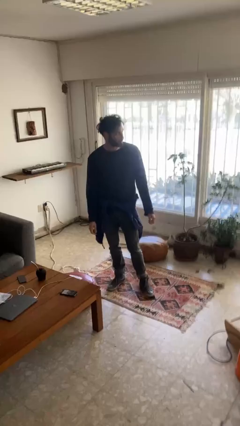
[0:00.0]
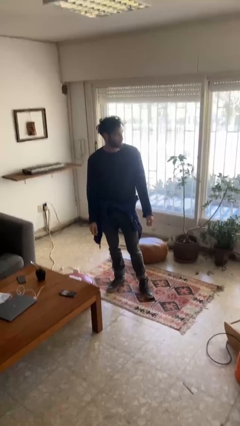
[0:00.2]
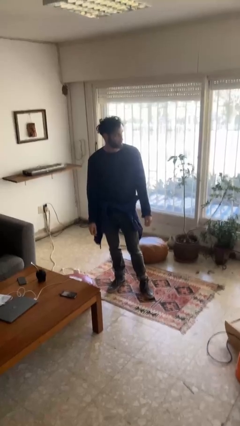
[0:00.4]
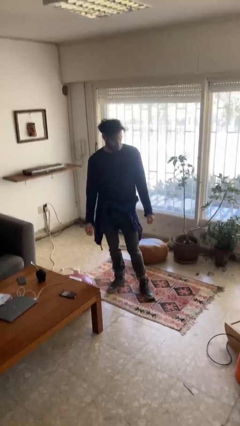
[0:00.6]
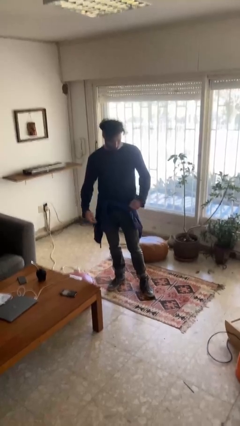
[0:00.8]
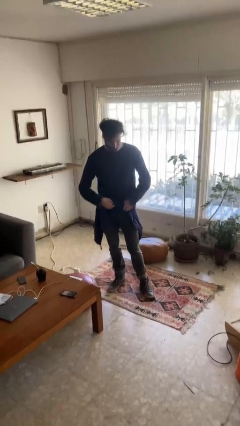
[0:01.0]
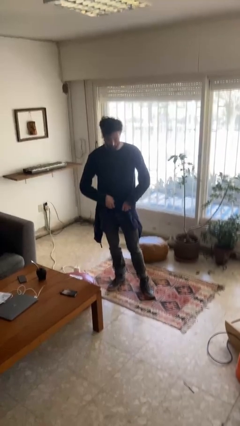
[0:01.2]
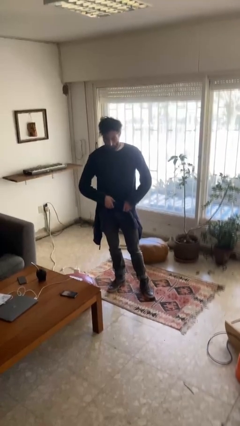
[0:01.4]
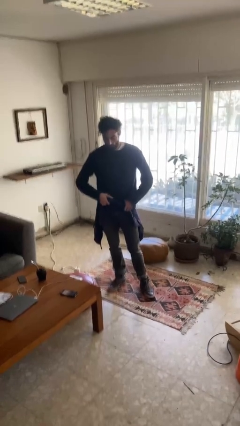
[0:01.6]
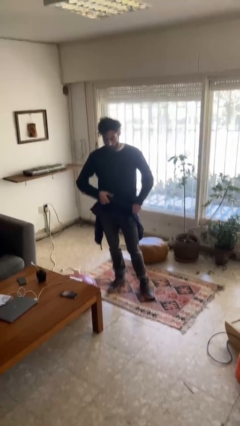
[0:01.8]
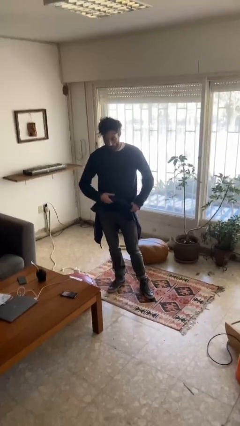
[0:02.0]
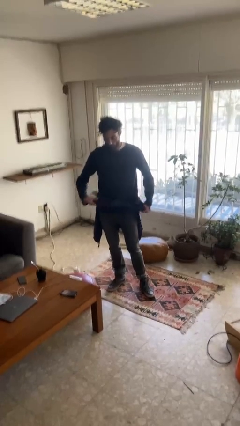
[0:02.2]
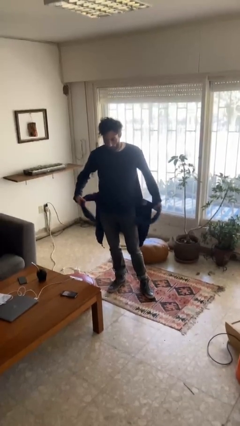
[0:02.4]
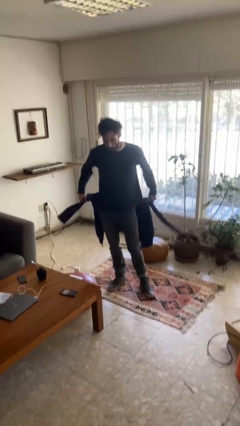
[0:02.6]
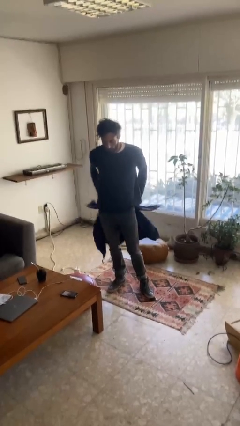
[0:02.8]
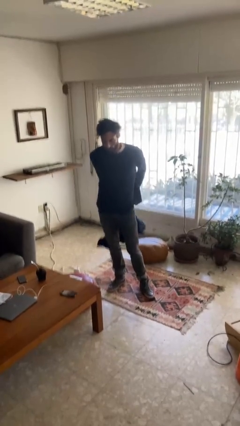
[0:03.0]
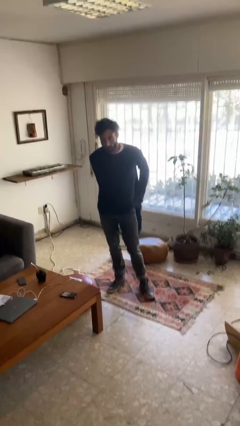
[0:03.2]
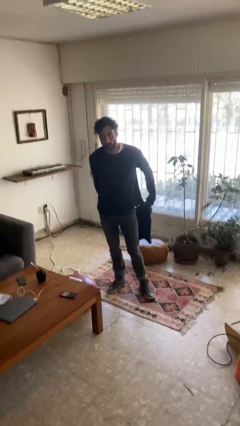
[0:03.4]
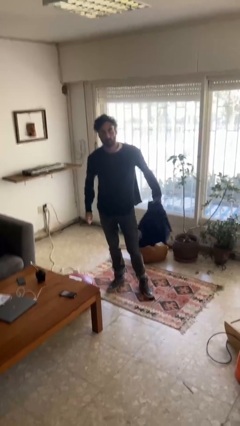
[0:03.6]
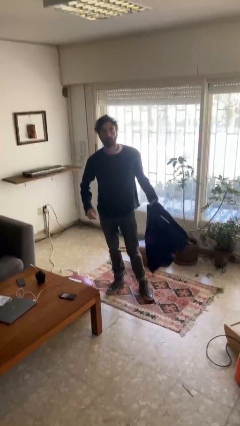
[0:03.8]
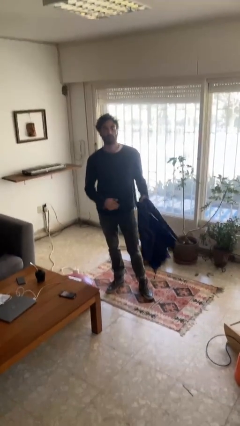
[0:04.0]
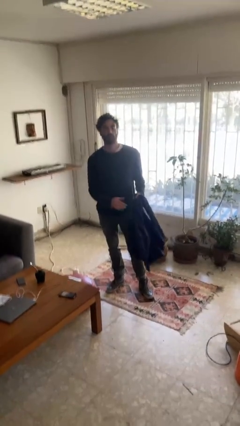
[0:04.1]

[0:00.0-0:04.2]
person unties jacket around waist

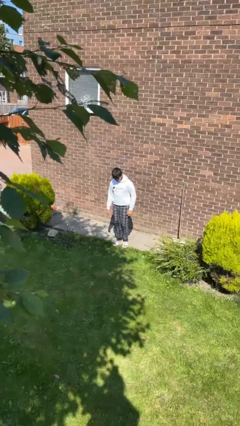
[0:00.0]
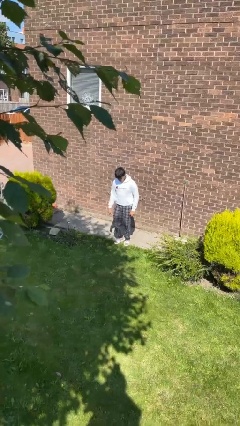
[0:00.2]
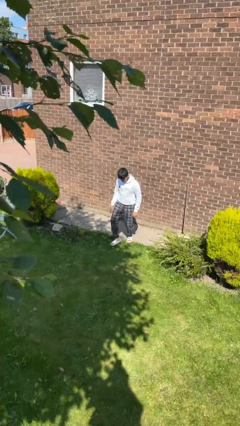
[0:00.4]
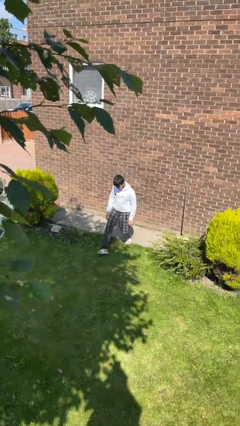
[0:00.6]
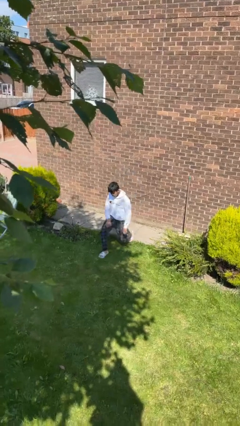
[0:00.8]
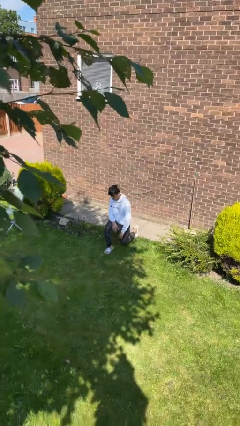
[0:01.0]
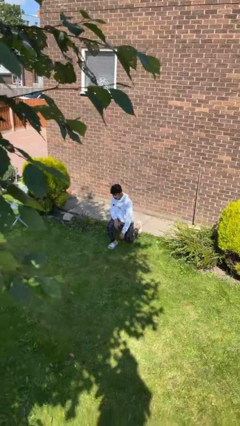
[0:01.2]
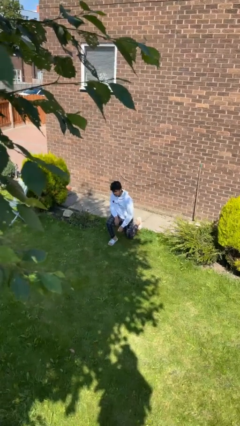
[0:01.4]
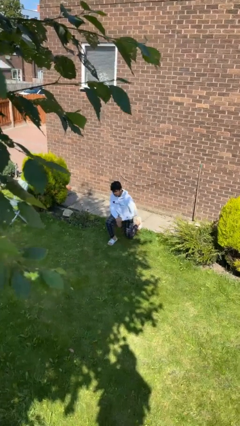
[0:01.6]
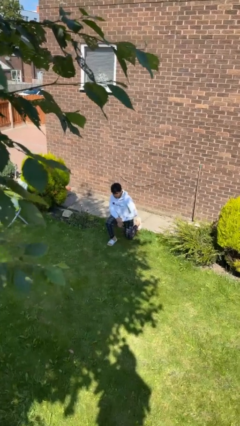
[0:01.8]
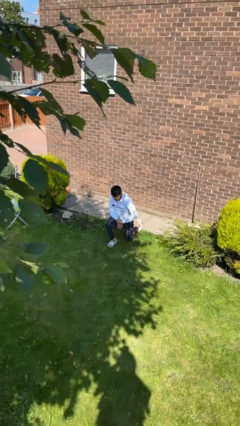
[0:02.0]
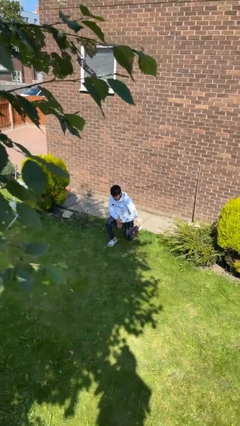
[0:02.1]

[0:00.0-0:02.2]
person kneels

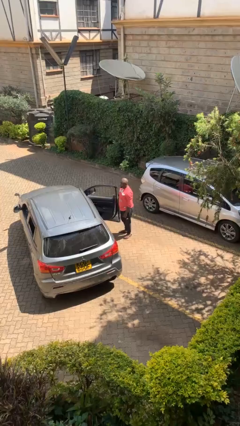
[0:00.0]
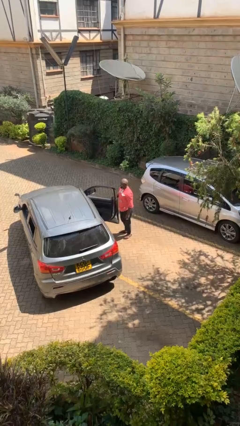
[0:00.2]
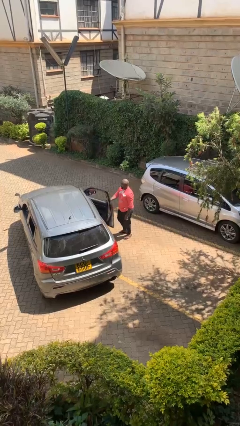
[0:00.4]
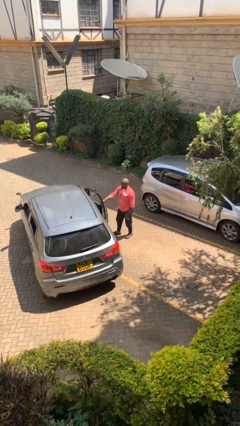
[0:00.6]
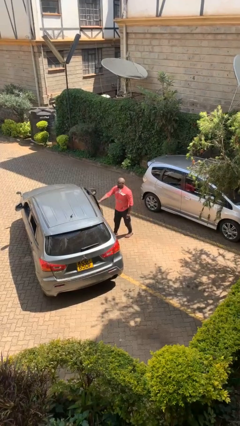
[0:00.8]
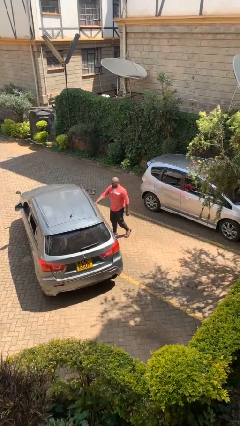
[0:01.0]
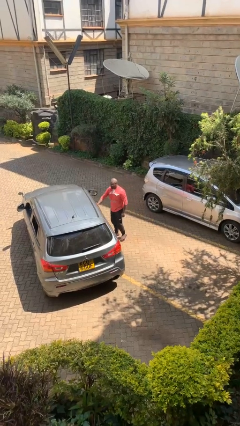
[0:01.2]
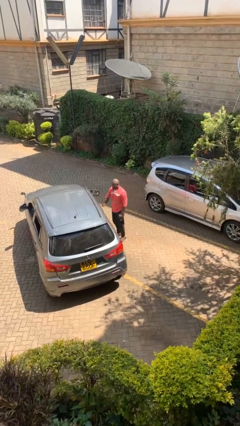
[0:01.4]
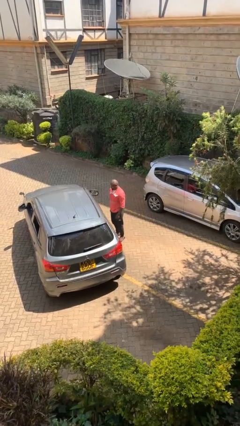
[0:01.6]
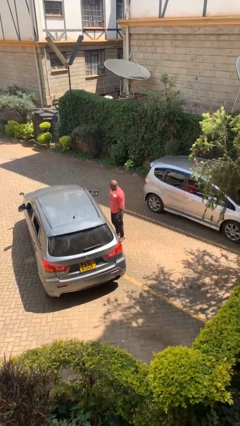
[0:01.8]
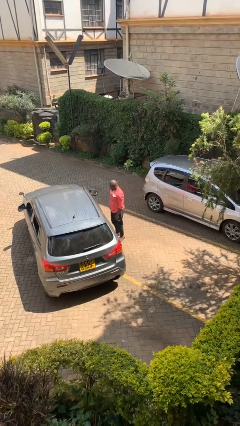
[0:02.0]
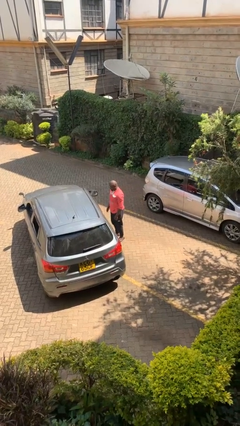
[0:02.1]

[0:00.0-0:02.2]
person closes car door

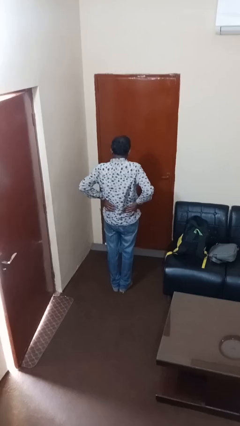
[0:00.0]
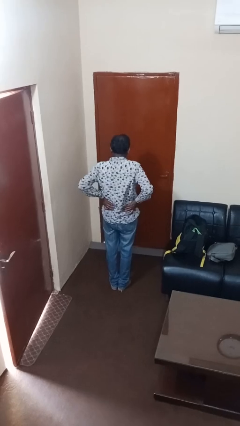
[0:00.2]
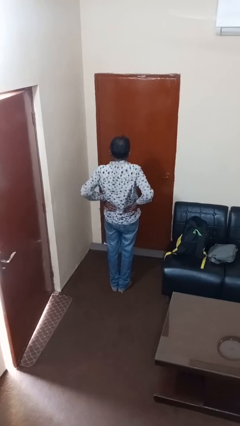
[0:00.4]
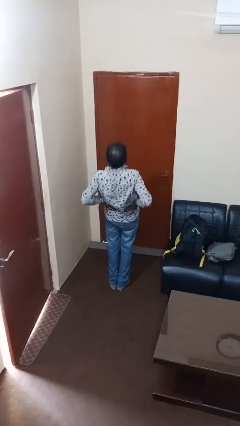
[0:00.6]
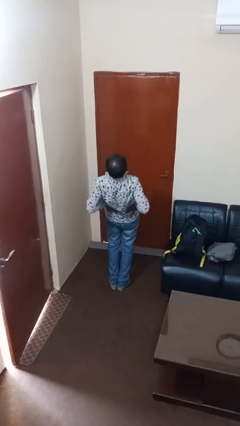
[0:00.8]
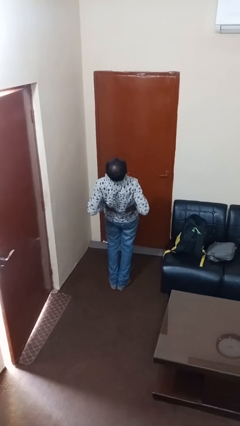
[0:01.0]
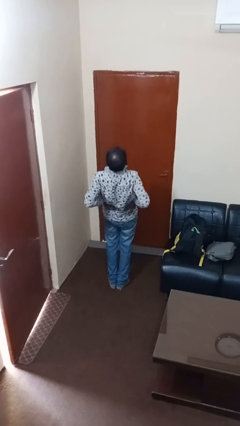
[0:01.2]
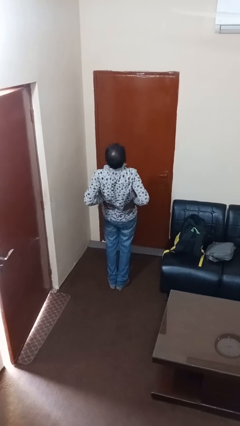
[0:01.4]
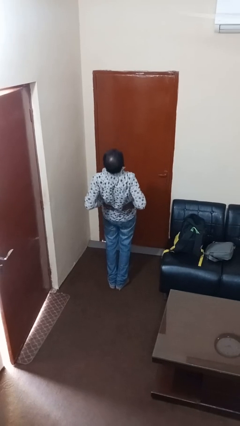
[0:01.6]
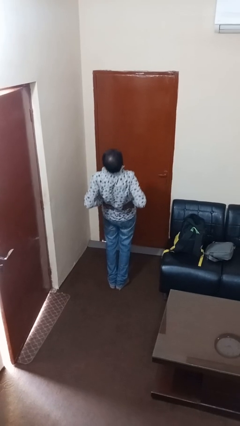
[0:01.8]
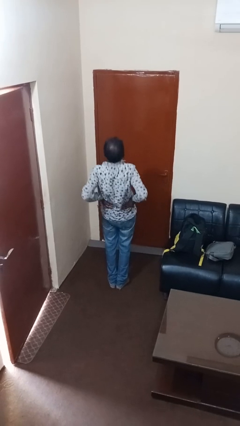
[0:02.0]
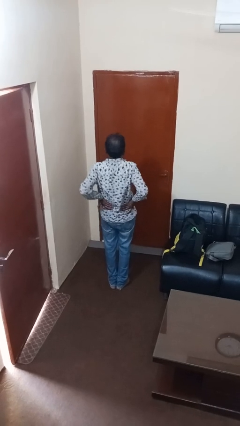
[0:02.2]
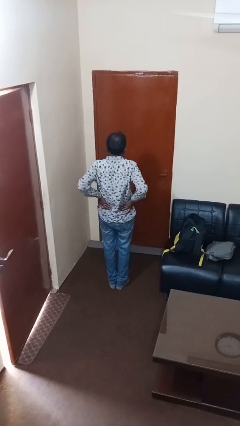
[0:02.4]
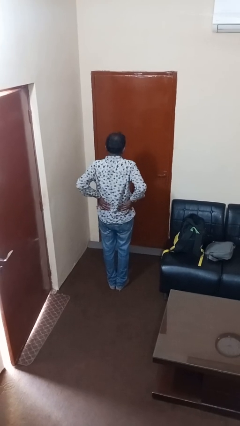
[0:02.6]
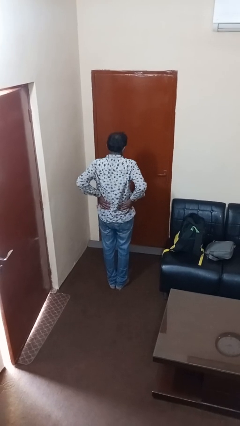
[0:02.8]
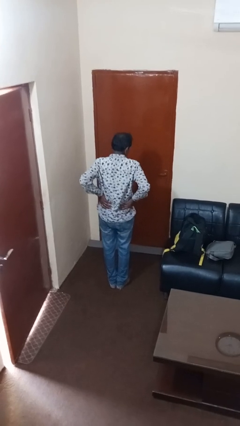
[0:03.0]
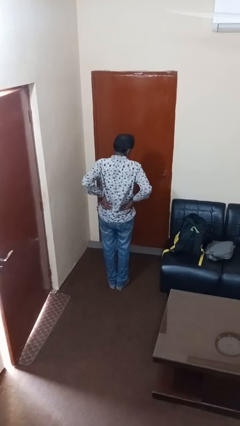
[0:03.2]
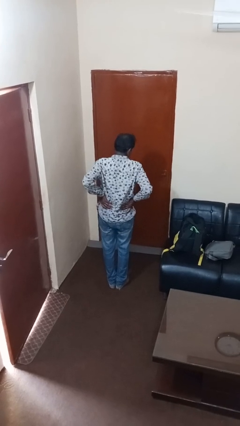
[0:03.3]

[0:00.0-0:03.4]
person stretches back

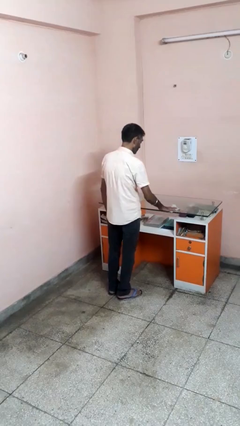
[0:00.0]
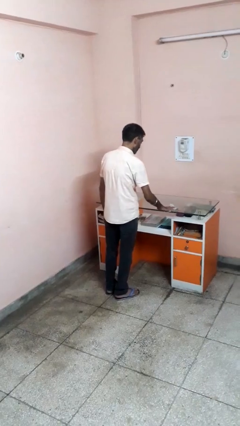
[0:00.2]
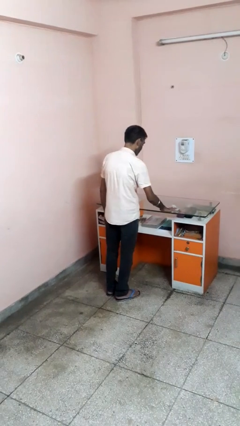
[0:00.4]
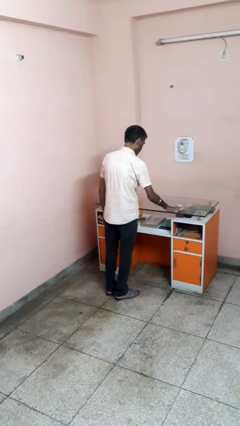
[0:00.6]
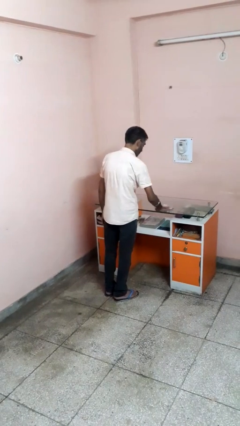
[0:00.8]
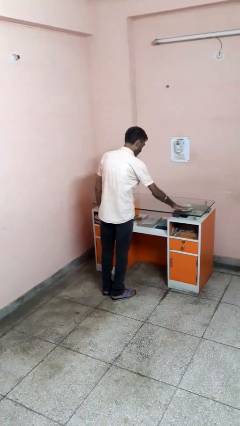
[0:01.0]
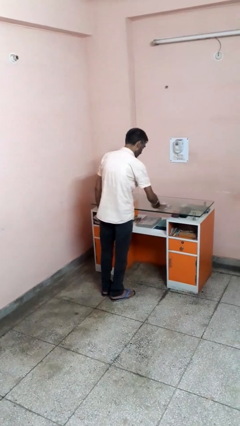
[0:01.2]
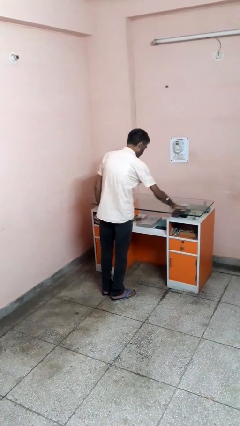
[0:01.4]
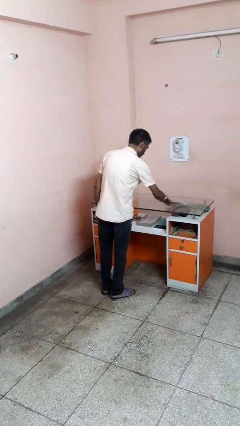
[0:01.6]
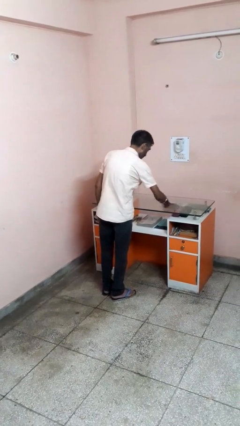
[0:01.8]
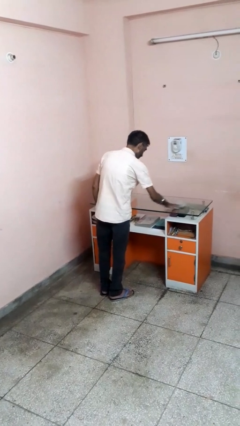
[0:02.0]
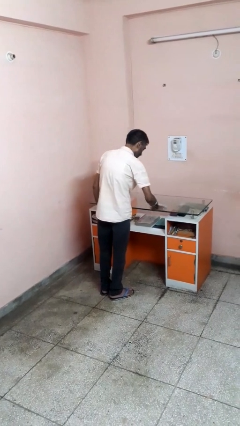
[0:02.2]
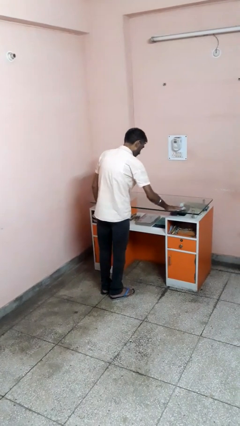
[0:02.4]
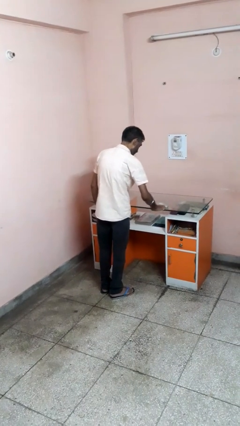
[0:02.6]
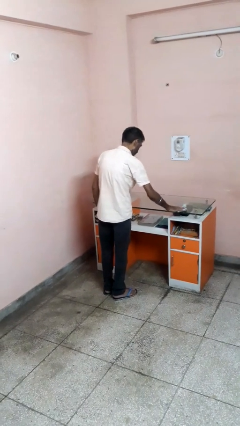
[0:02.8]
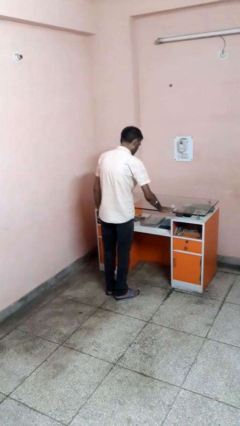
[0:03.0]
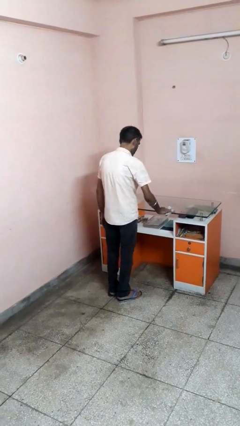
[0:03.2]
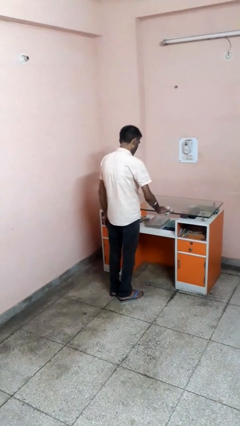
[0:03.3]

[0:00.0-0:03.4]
person cleans table with rag

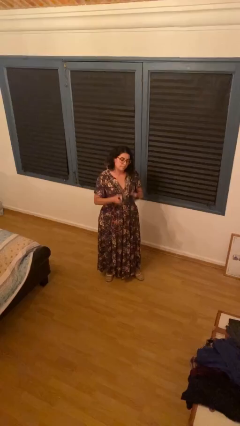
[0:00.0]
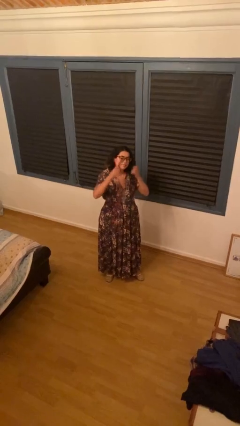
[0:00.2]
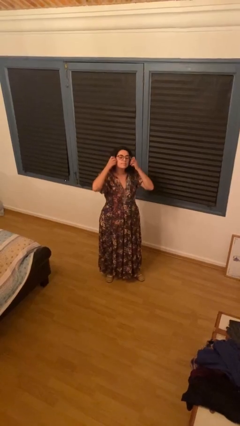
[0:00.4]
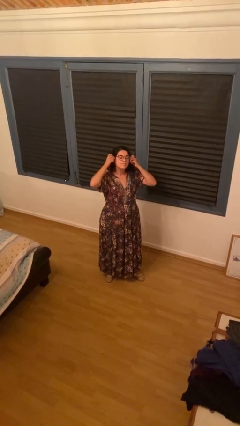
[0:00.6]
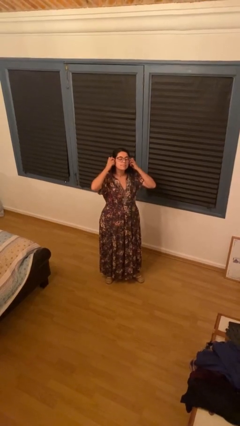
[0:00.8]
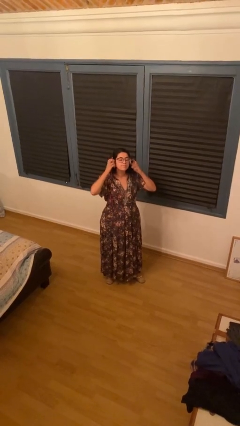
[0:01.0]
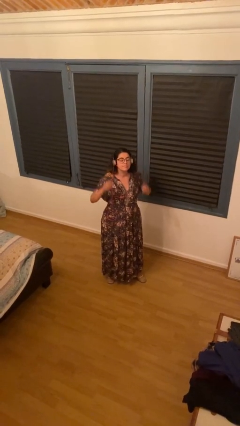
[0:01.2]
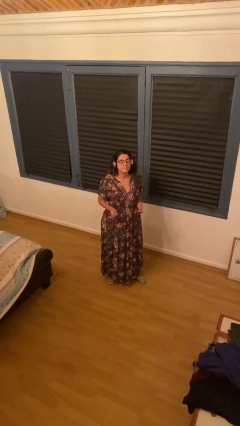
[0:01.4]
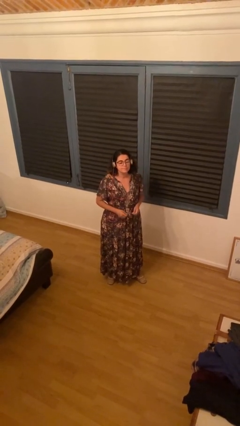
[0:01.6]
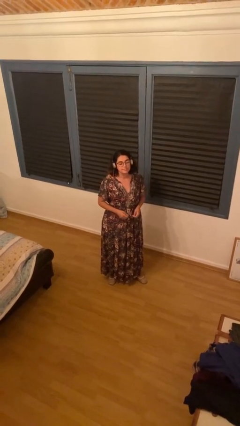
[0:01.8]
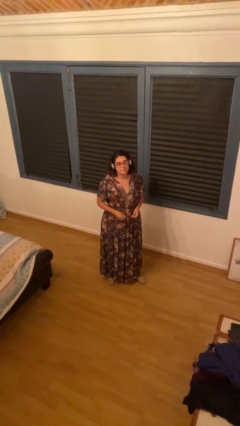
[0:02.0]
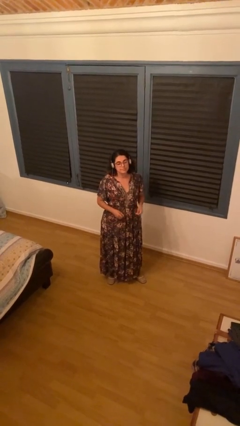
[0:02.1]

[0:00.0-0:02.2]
person puts on headphones
